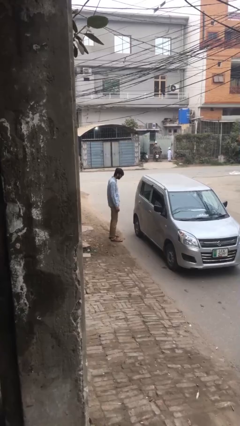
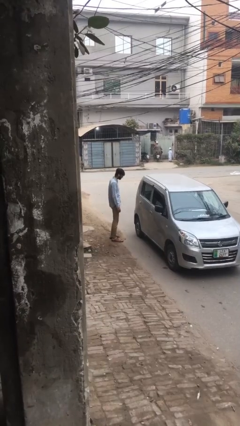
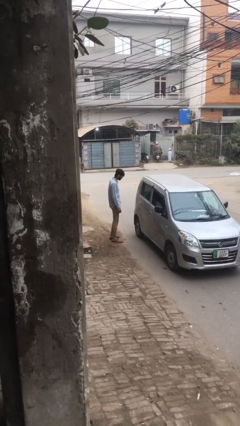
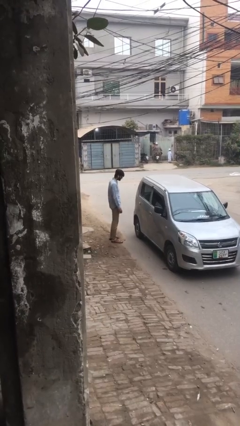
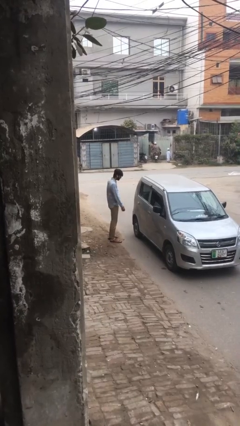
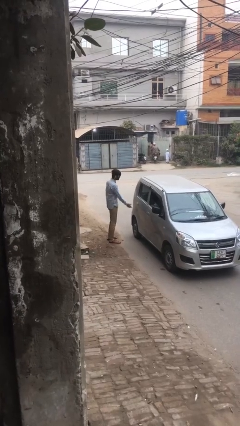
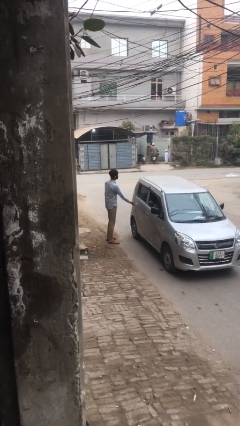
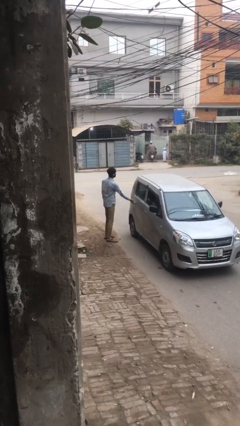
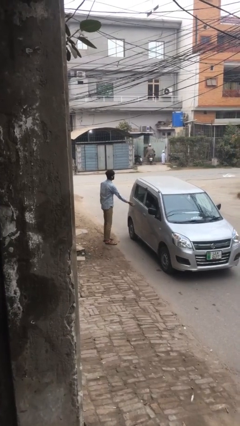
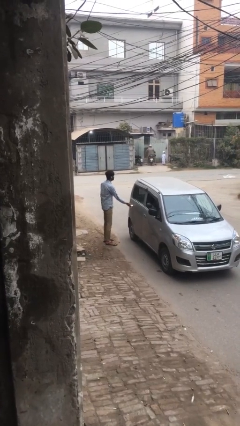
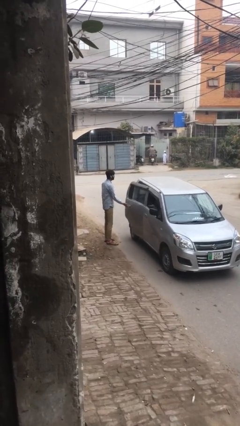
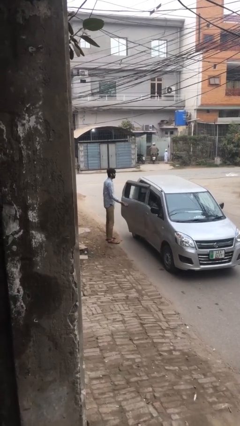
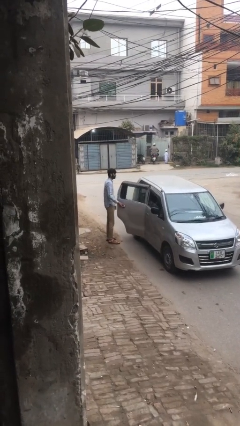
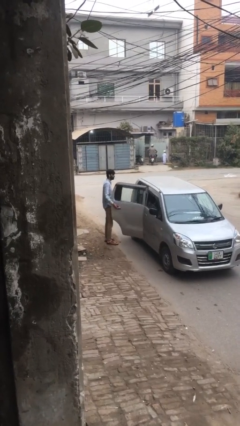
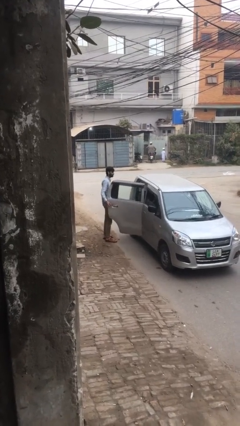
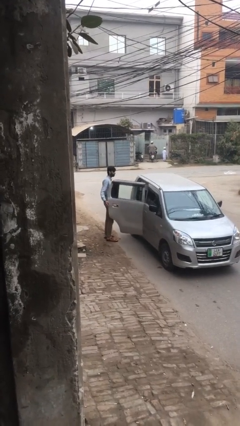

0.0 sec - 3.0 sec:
person opens car door

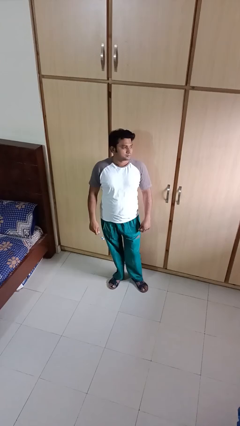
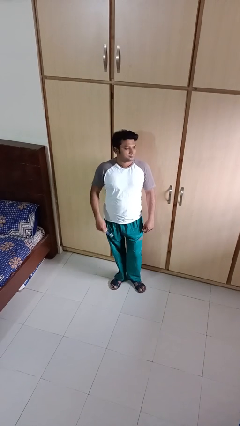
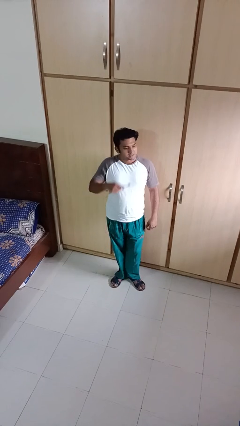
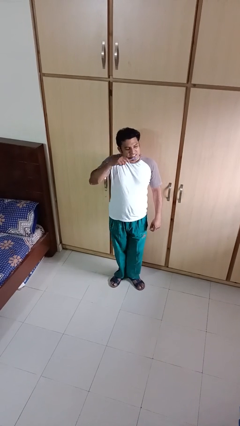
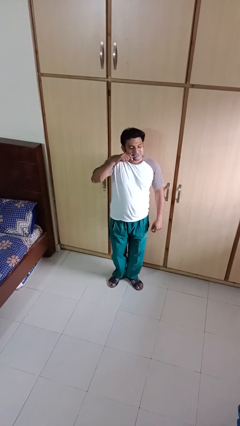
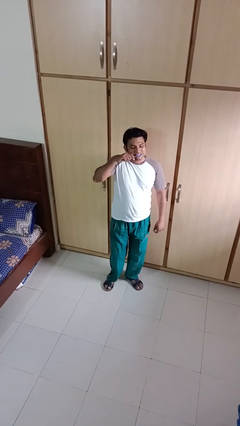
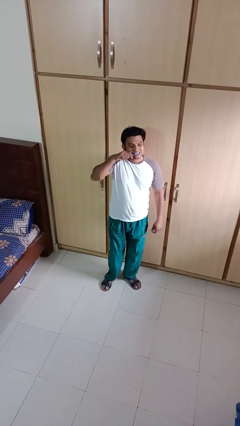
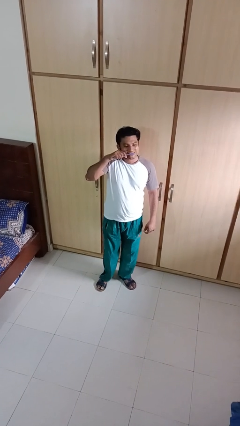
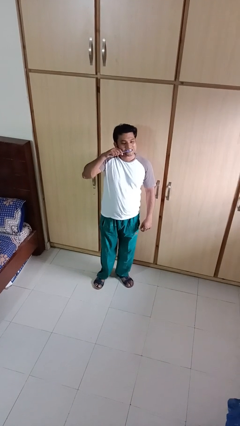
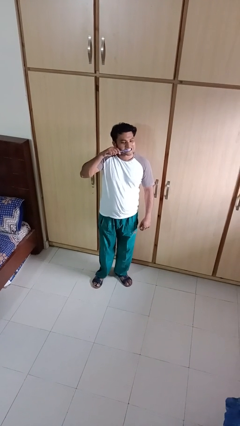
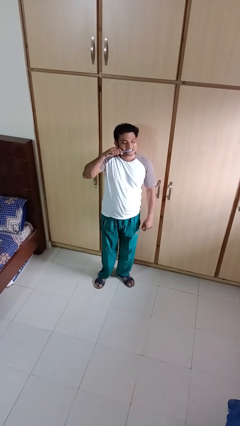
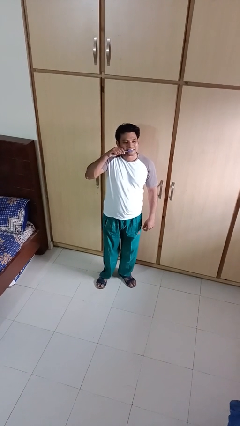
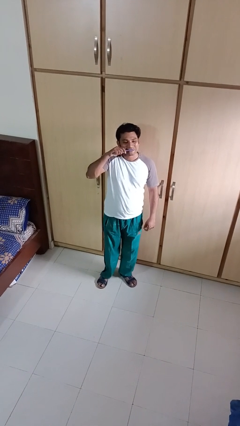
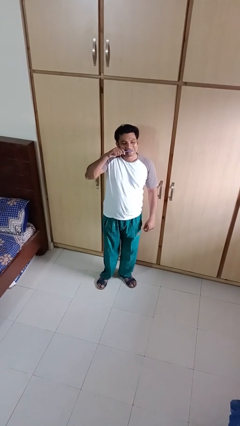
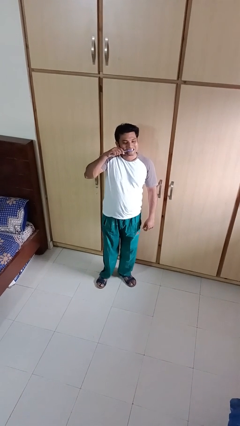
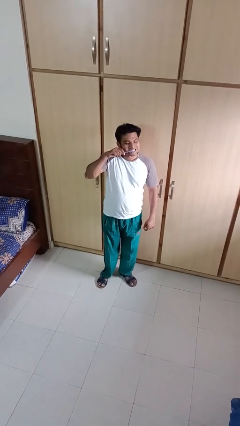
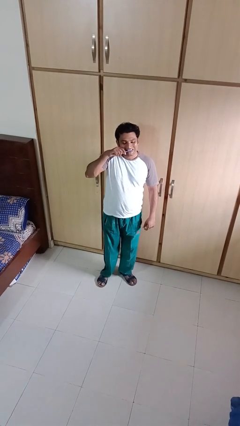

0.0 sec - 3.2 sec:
person brushes teeth

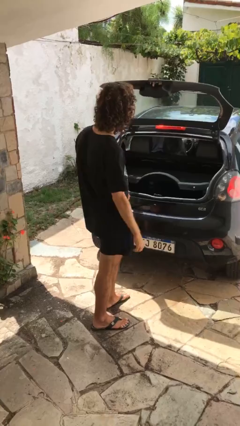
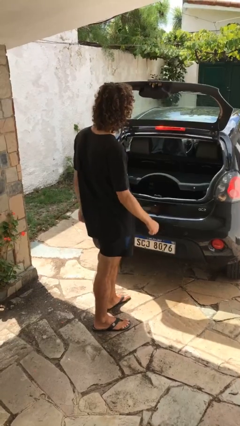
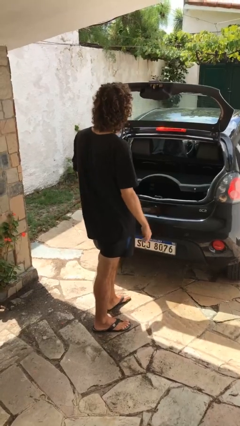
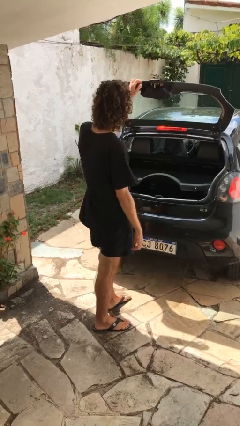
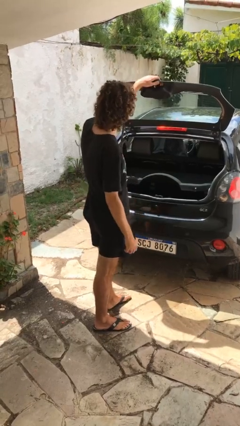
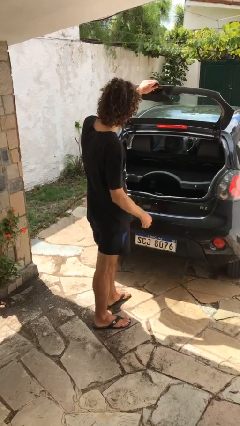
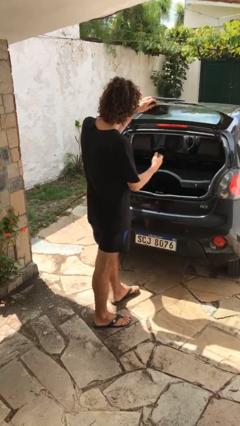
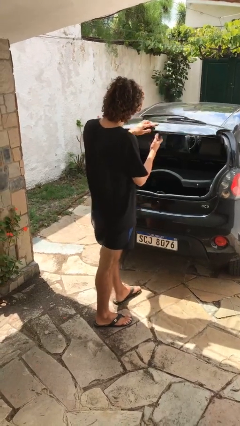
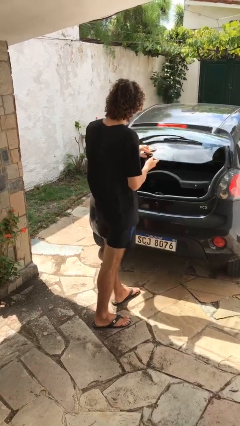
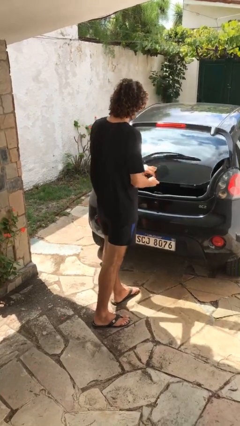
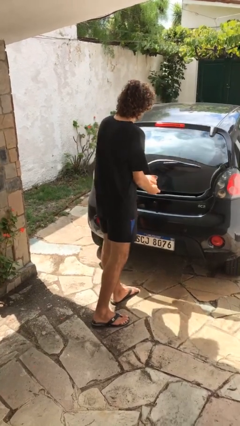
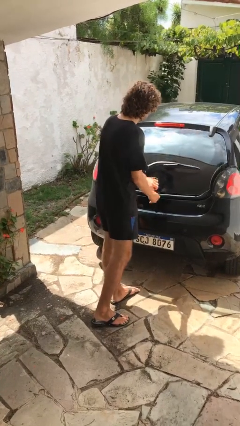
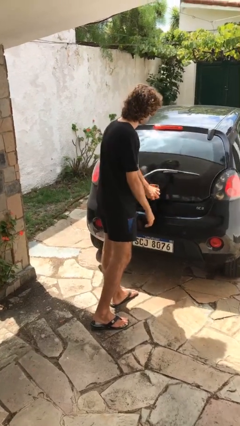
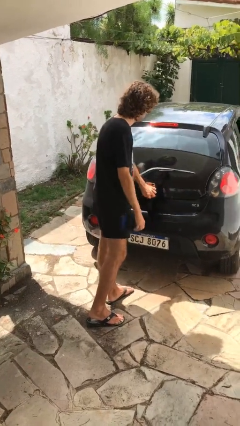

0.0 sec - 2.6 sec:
person closes car trunk

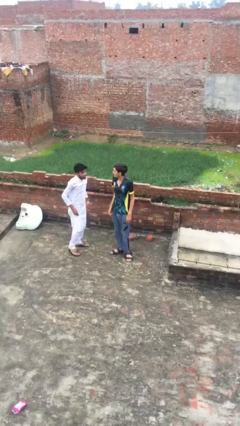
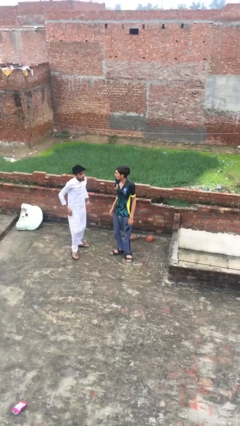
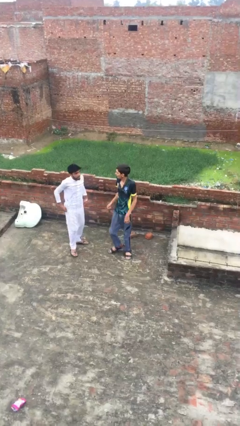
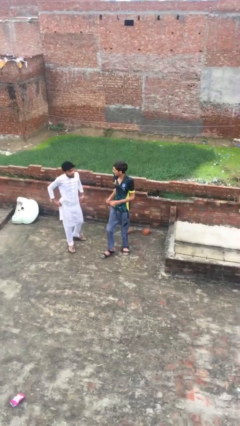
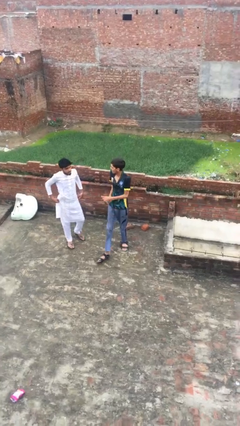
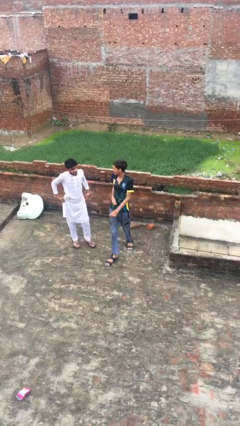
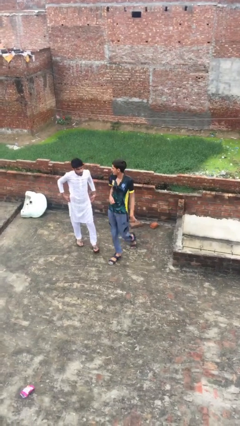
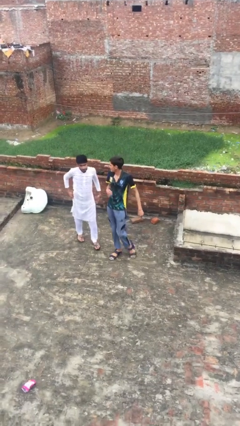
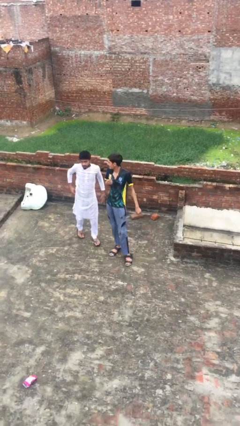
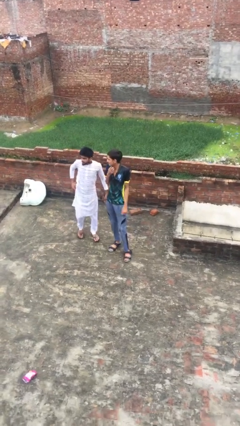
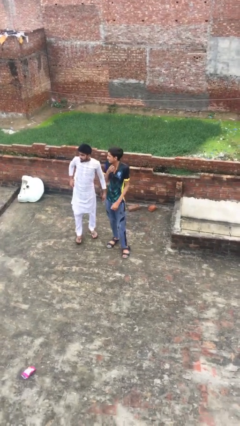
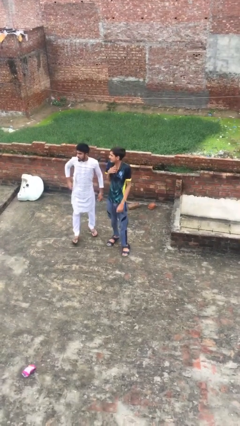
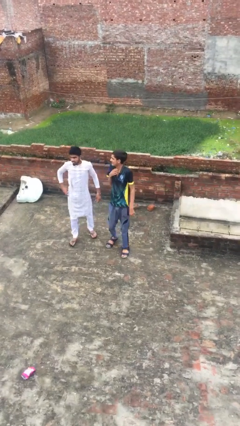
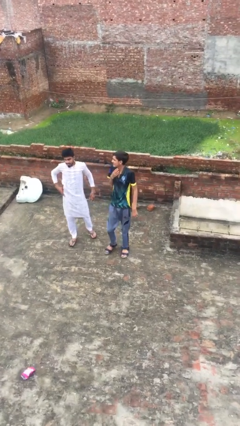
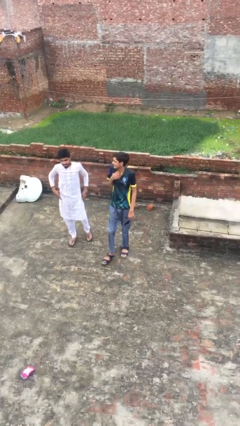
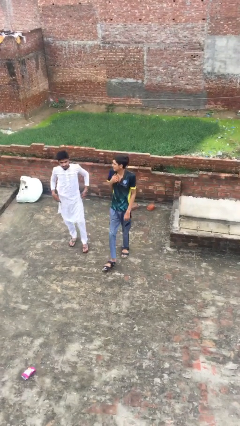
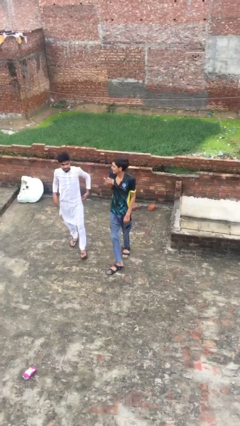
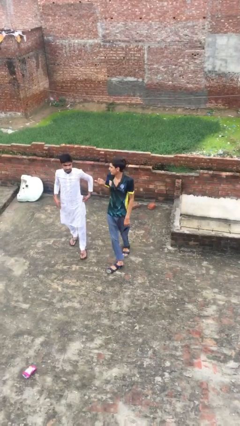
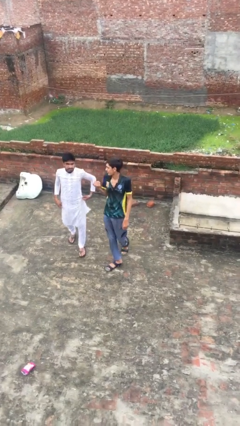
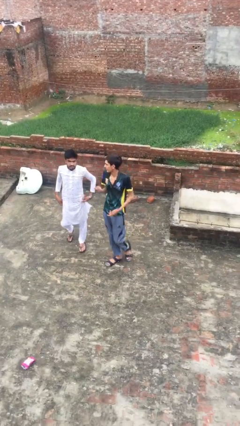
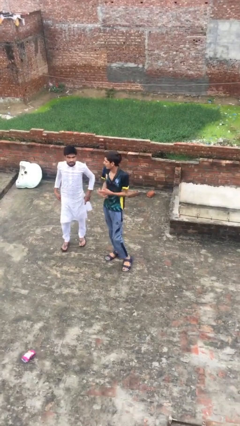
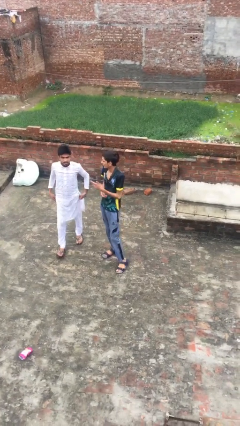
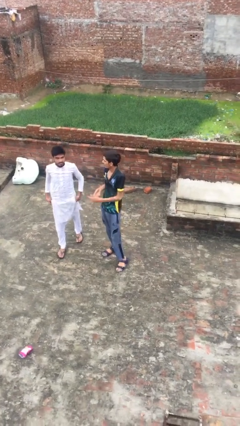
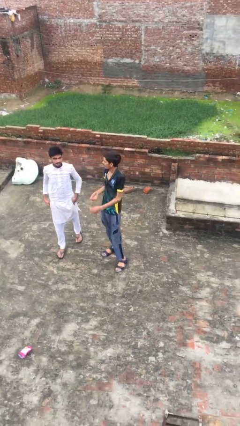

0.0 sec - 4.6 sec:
person talks to person

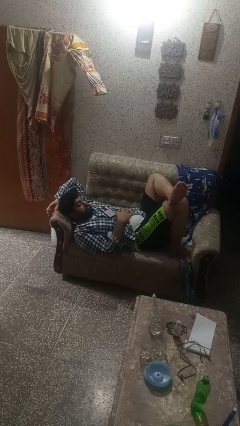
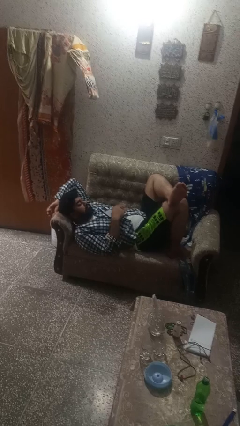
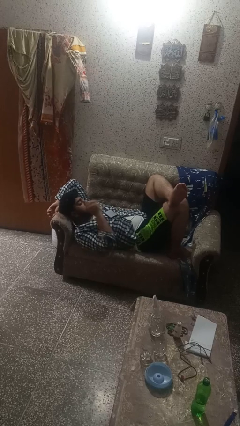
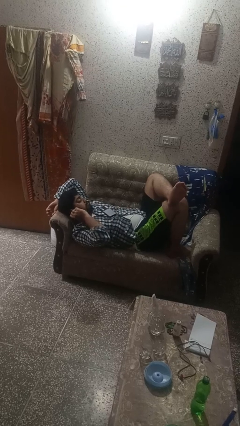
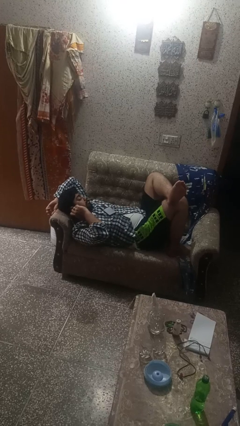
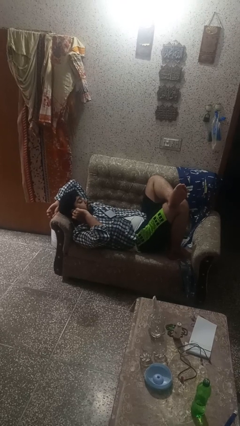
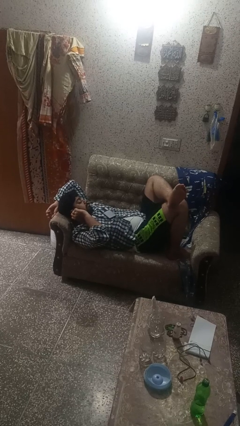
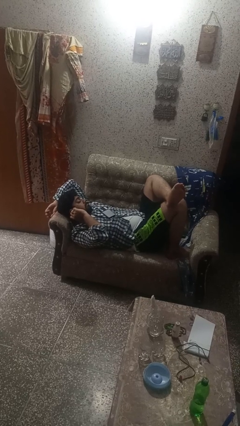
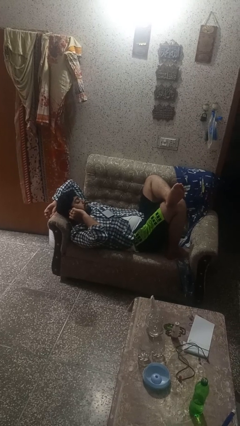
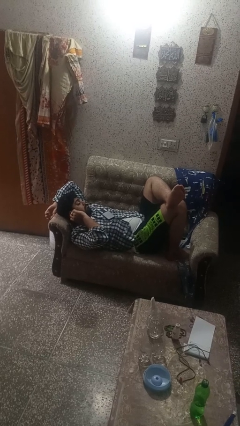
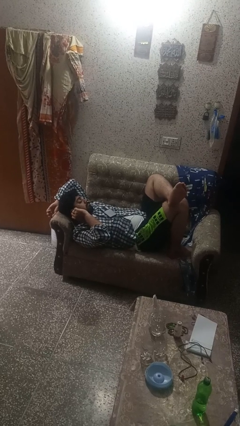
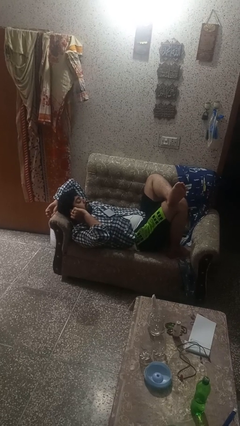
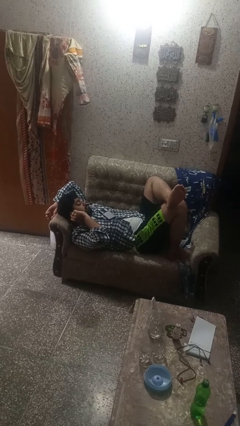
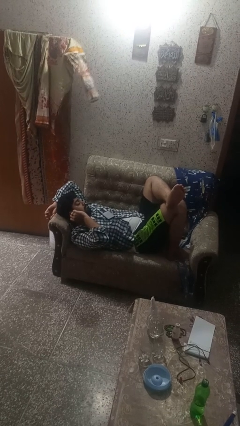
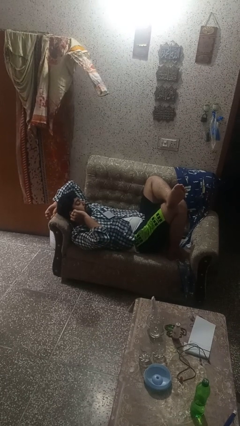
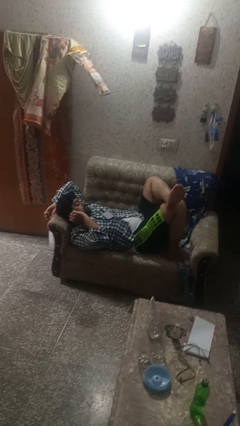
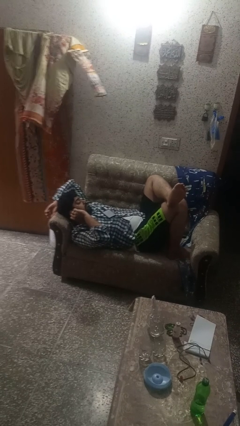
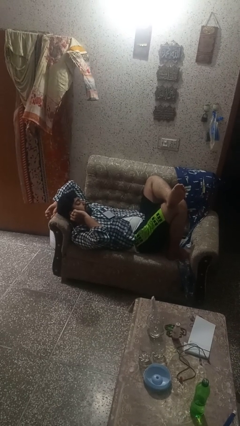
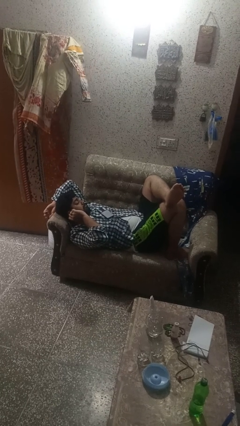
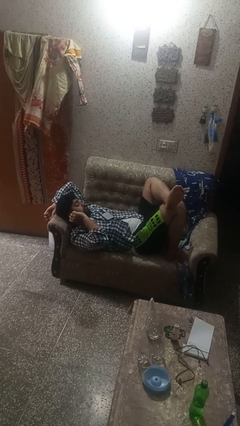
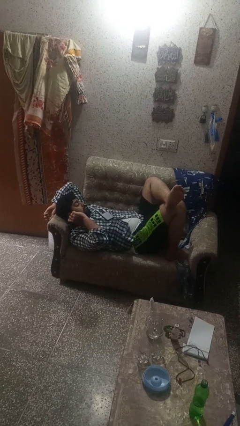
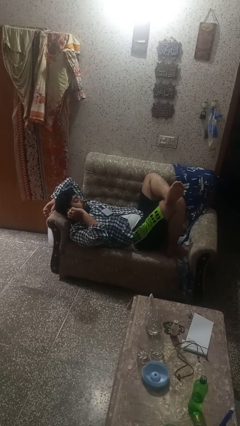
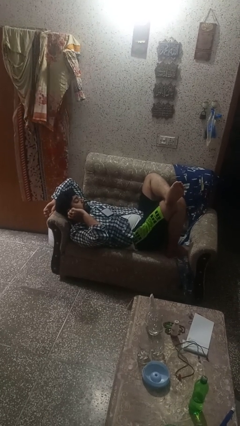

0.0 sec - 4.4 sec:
person touches earlobe
